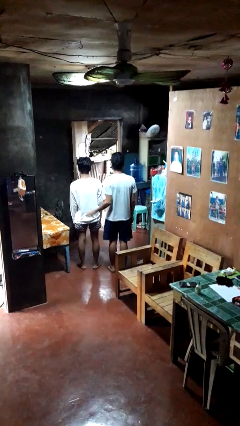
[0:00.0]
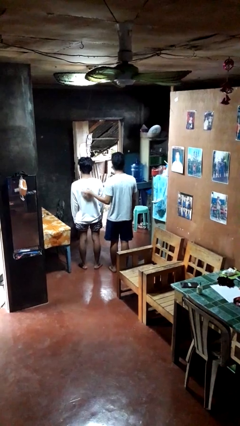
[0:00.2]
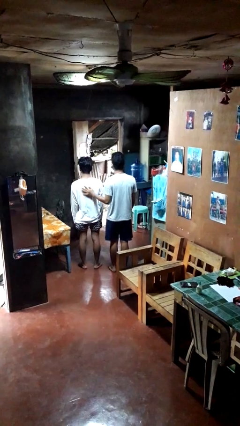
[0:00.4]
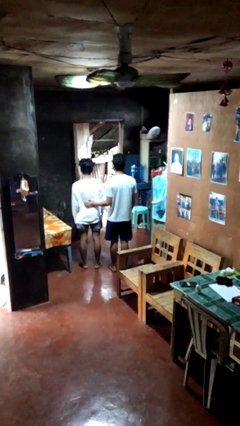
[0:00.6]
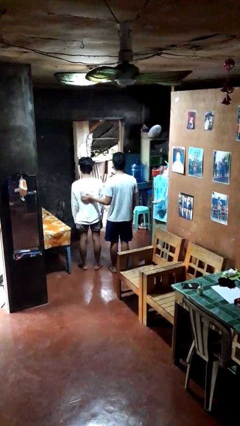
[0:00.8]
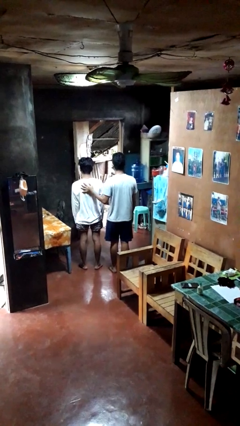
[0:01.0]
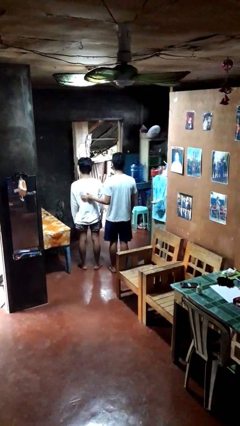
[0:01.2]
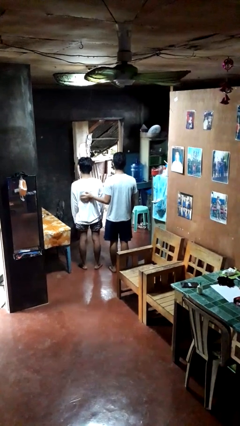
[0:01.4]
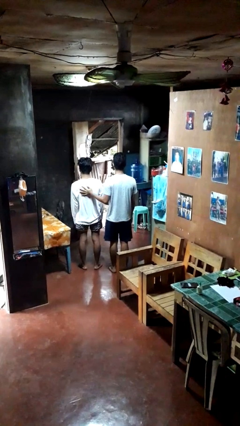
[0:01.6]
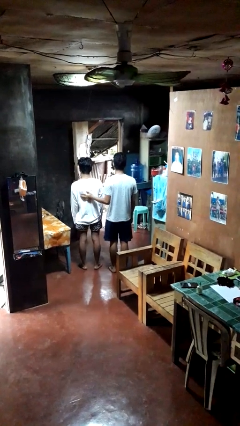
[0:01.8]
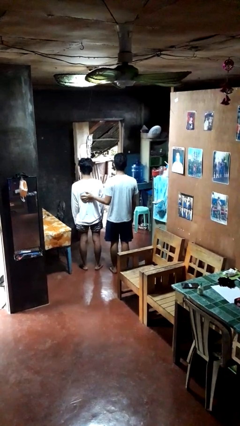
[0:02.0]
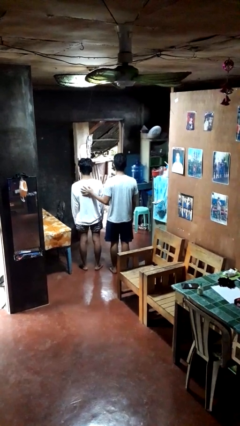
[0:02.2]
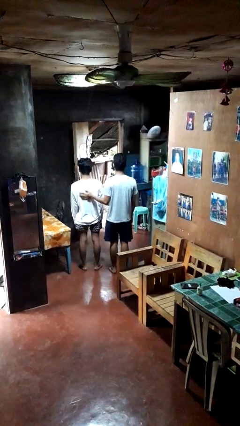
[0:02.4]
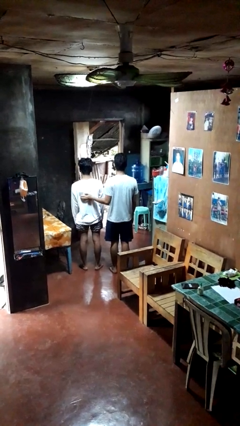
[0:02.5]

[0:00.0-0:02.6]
person touches back of person

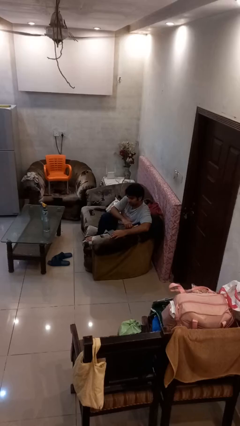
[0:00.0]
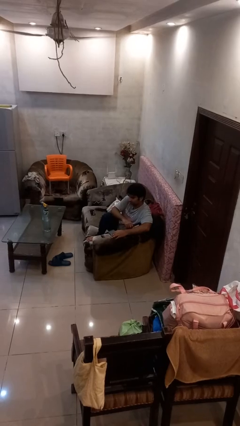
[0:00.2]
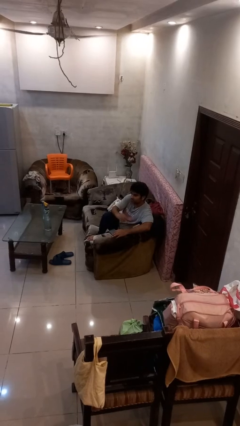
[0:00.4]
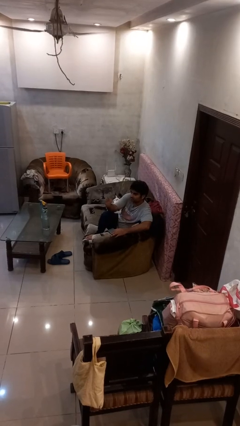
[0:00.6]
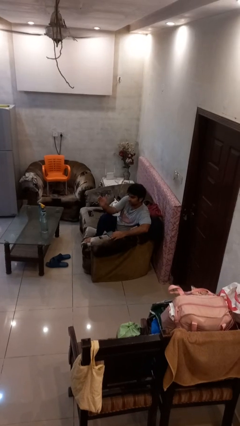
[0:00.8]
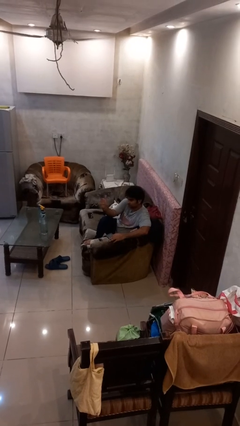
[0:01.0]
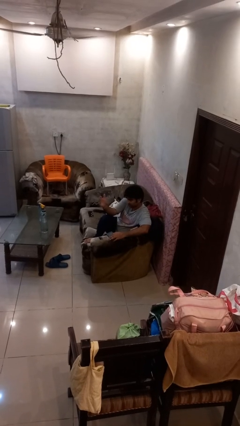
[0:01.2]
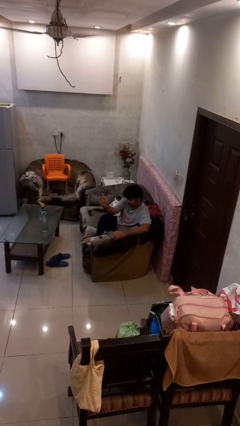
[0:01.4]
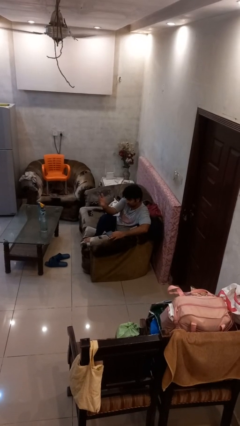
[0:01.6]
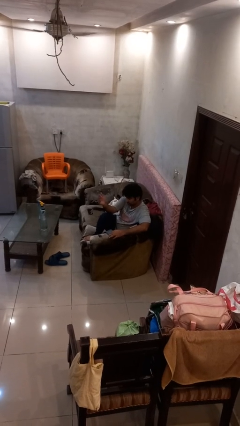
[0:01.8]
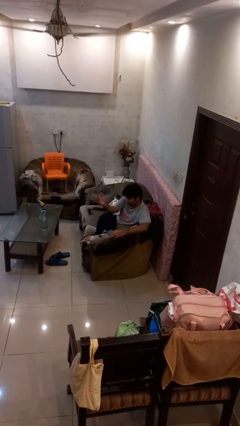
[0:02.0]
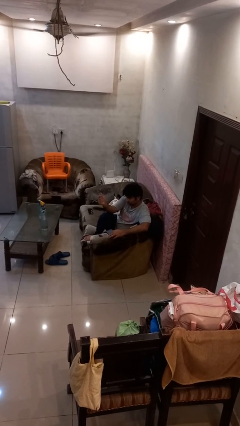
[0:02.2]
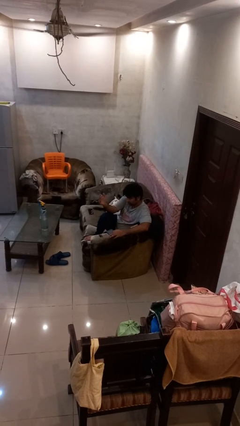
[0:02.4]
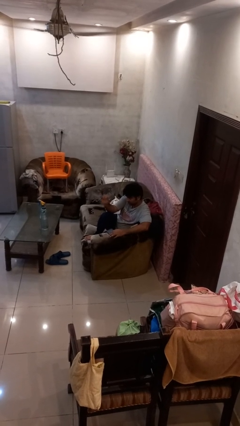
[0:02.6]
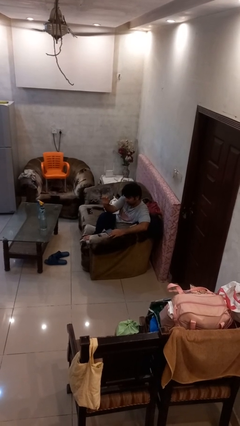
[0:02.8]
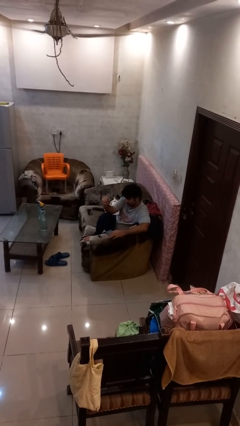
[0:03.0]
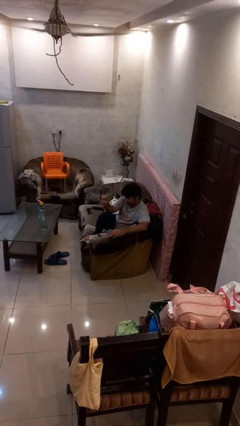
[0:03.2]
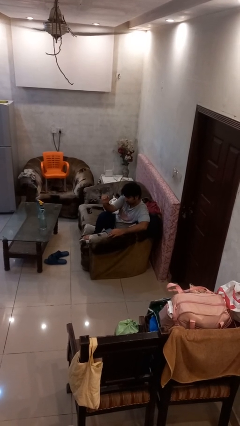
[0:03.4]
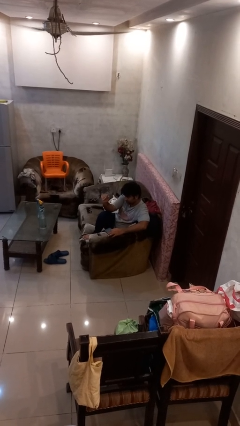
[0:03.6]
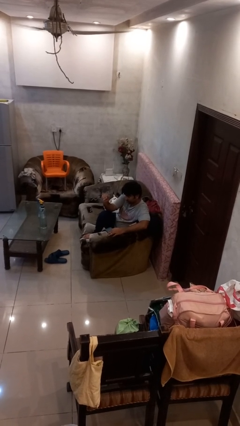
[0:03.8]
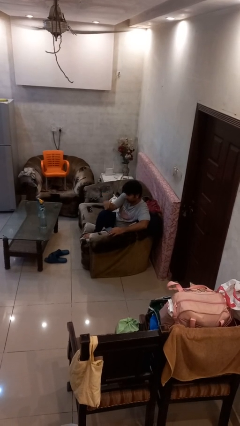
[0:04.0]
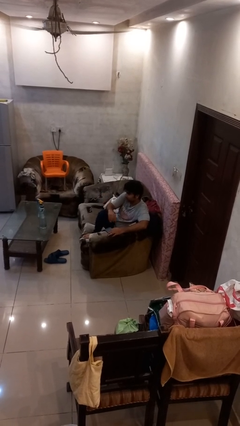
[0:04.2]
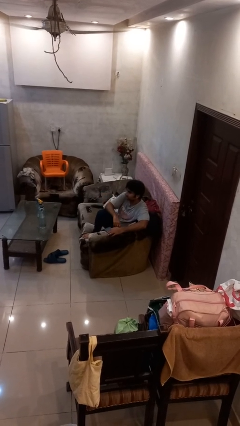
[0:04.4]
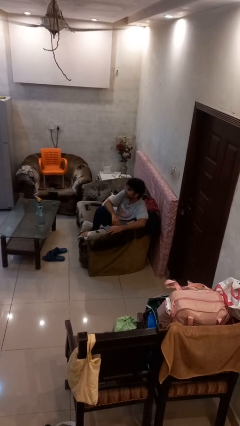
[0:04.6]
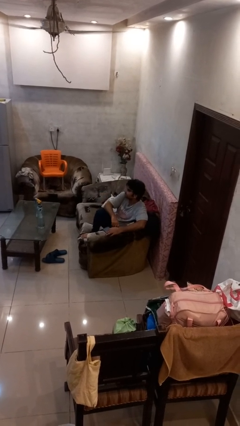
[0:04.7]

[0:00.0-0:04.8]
person gestures come here

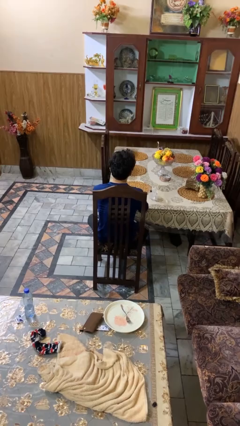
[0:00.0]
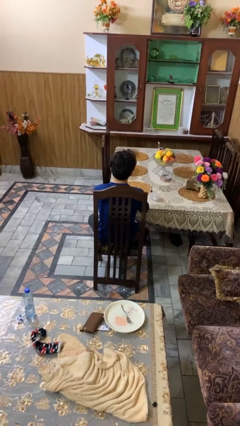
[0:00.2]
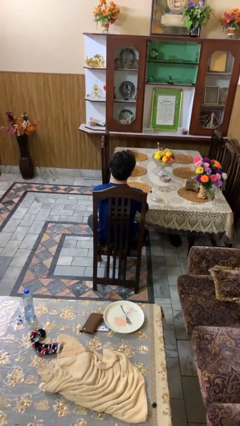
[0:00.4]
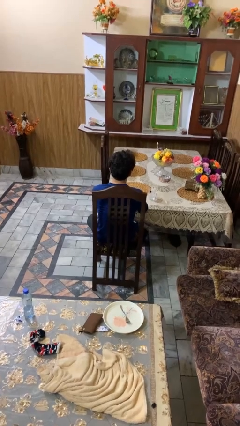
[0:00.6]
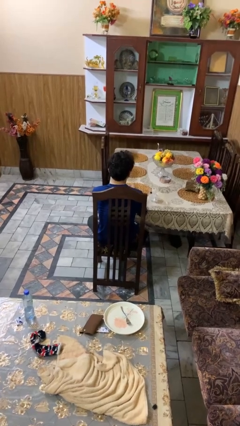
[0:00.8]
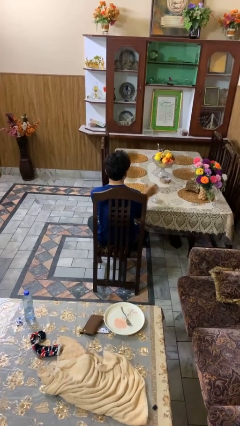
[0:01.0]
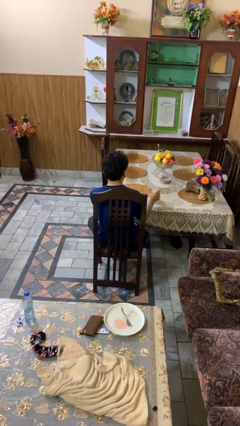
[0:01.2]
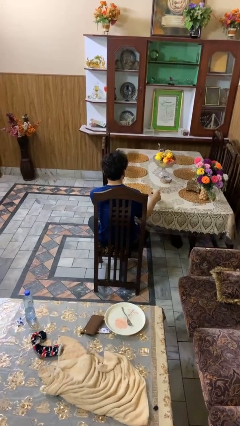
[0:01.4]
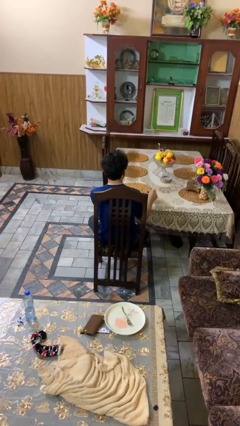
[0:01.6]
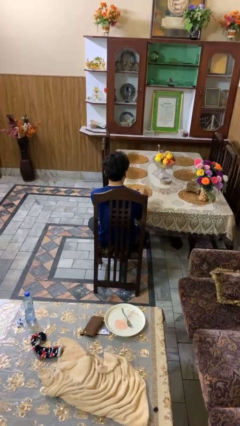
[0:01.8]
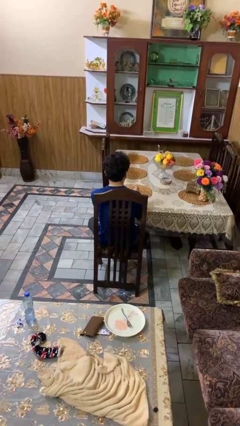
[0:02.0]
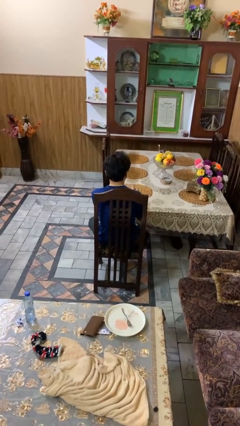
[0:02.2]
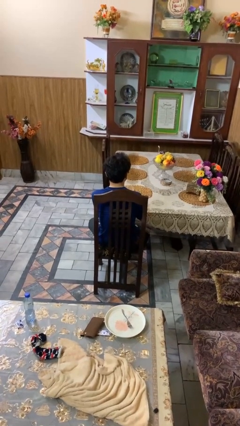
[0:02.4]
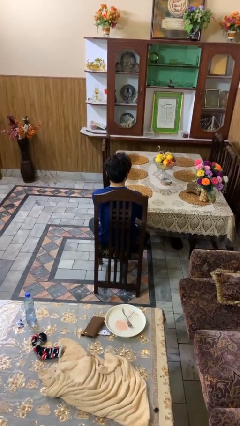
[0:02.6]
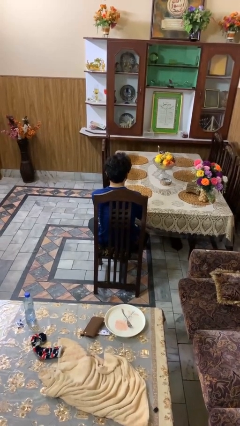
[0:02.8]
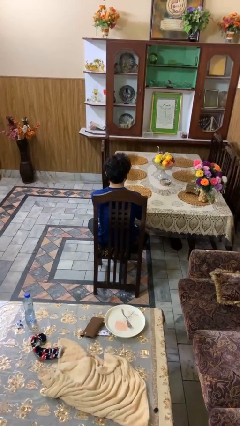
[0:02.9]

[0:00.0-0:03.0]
person picks up object from table

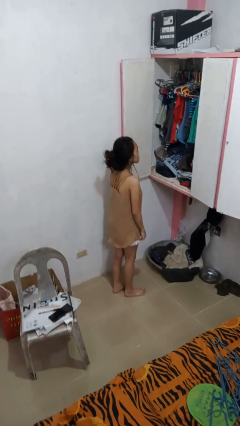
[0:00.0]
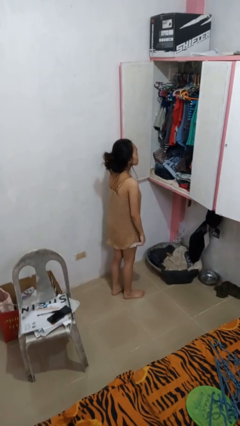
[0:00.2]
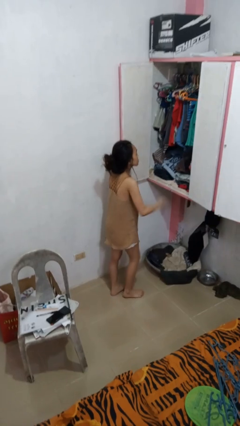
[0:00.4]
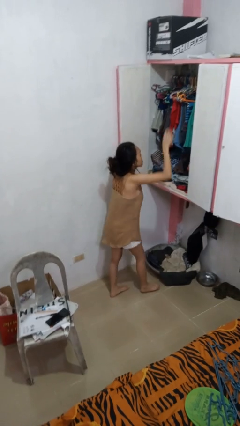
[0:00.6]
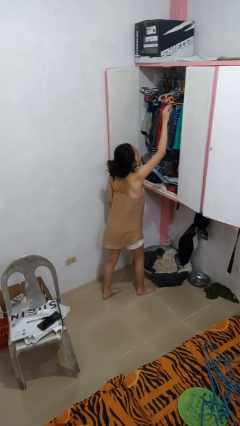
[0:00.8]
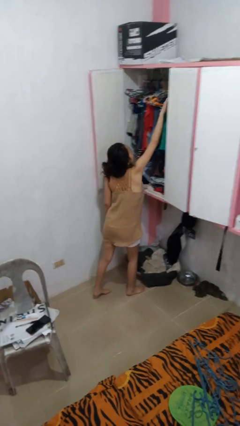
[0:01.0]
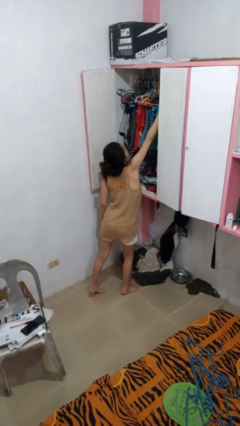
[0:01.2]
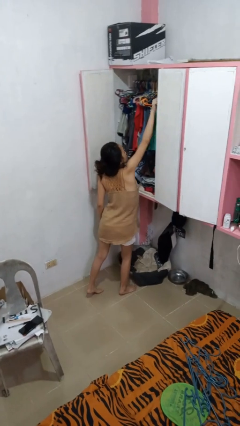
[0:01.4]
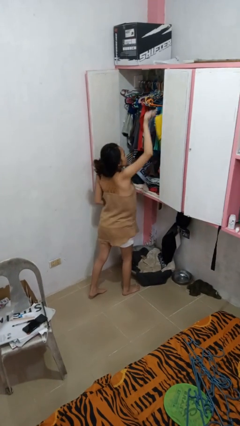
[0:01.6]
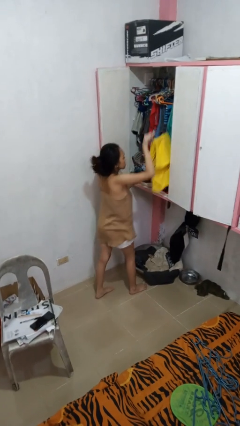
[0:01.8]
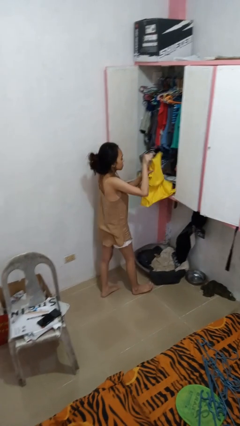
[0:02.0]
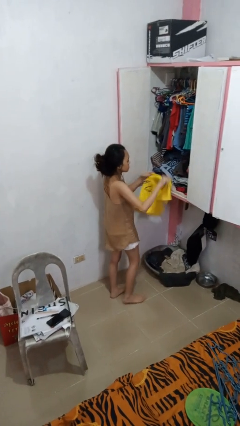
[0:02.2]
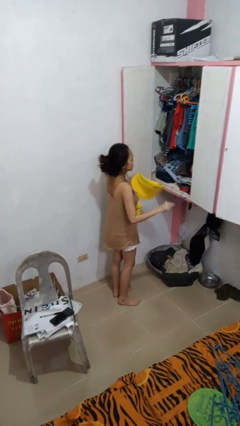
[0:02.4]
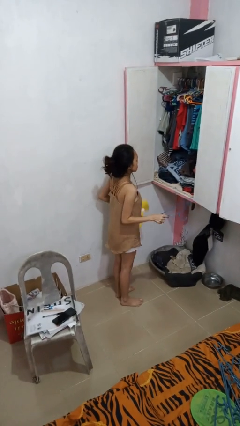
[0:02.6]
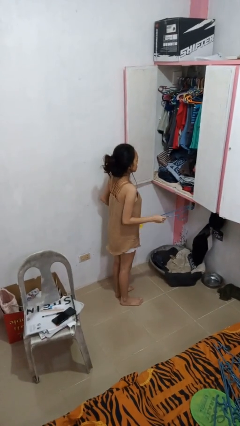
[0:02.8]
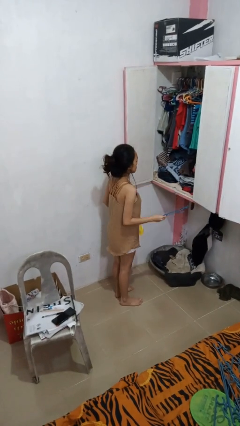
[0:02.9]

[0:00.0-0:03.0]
person takes clothes from closet

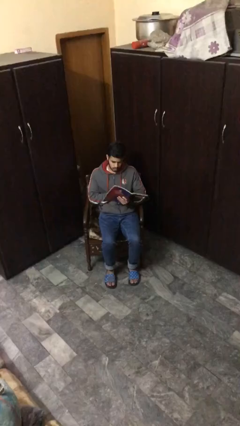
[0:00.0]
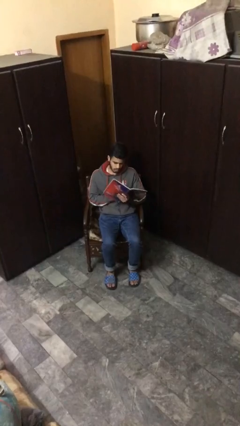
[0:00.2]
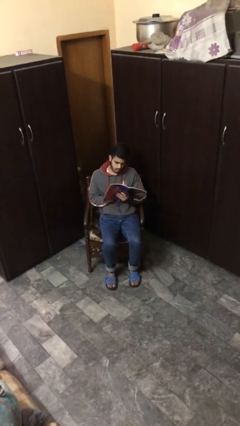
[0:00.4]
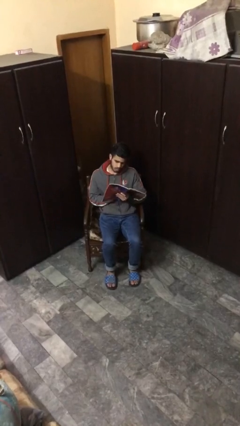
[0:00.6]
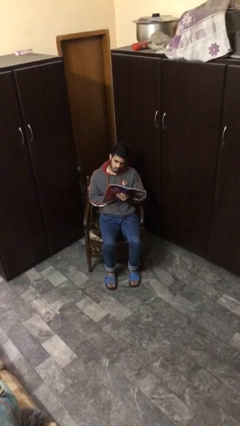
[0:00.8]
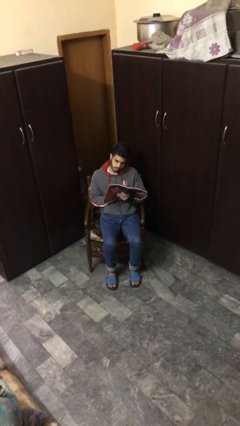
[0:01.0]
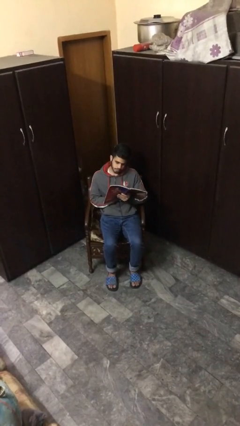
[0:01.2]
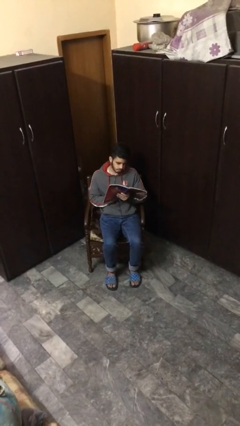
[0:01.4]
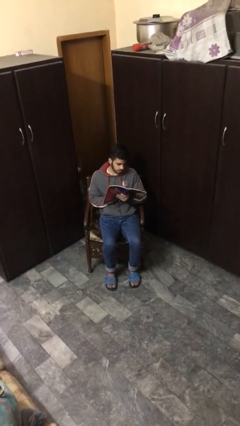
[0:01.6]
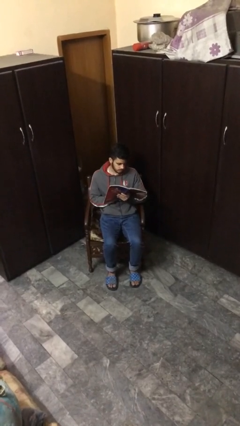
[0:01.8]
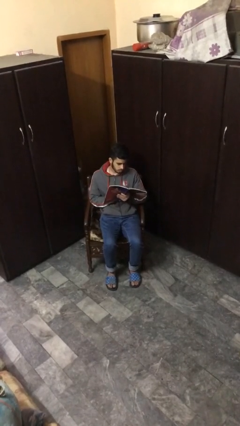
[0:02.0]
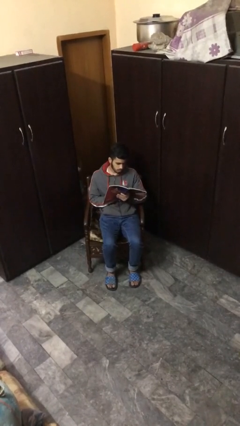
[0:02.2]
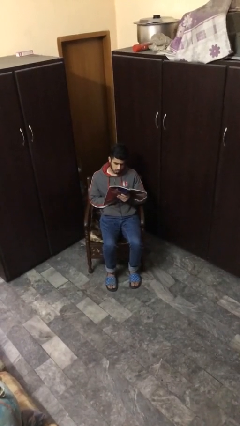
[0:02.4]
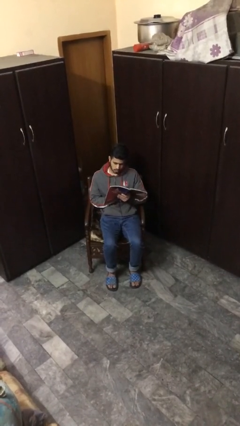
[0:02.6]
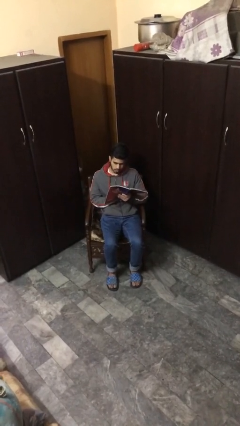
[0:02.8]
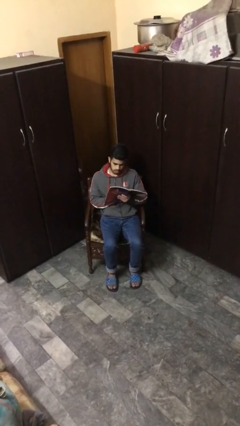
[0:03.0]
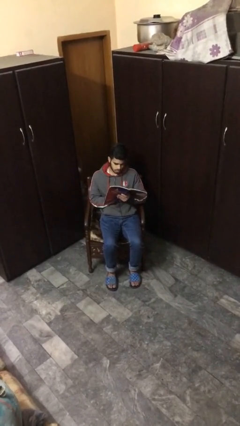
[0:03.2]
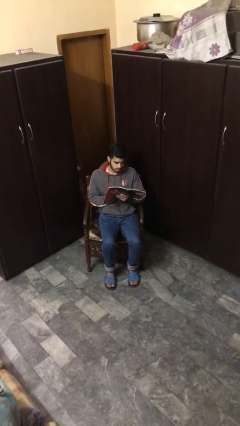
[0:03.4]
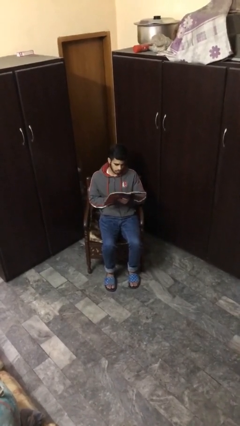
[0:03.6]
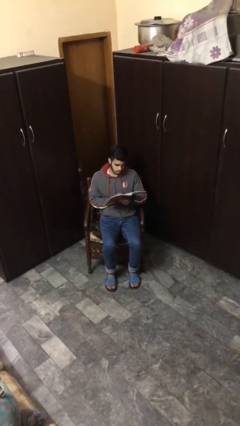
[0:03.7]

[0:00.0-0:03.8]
person reads document

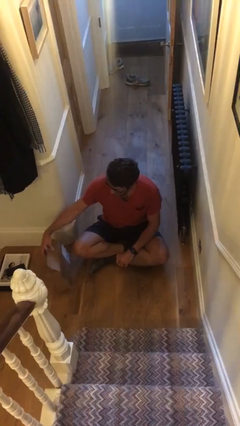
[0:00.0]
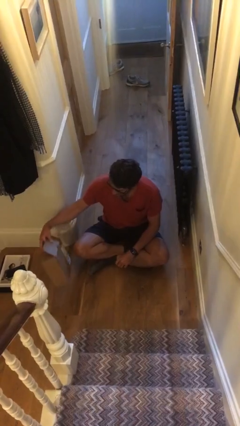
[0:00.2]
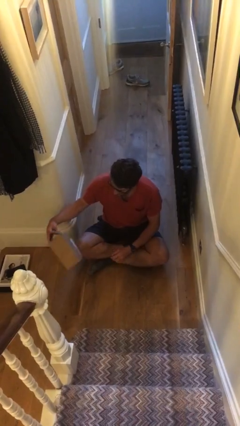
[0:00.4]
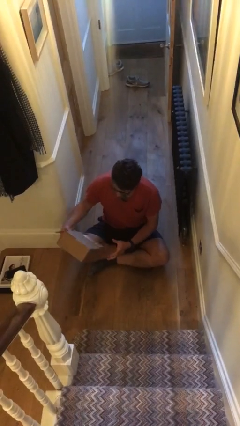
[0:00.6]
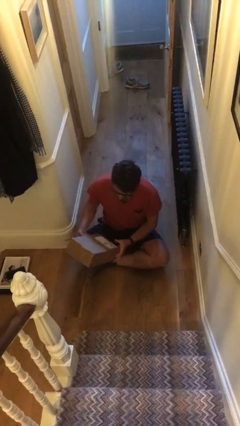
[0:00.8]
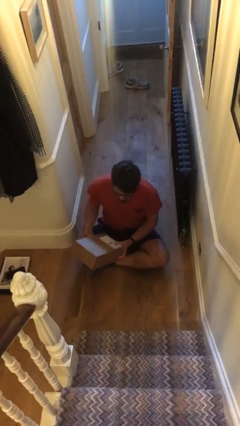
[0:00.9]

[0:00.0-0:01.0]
person picks up object from floor
